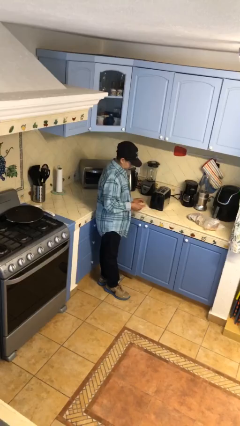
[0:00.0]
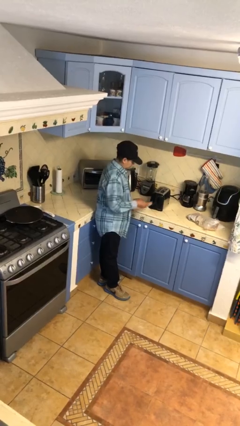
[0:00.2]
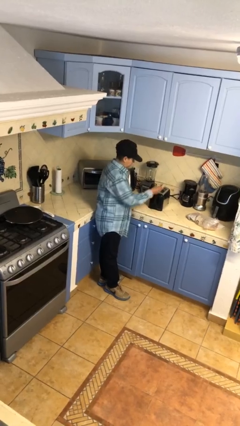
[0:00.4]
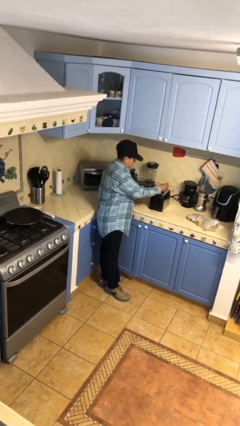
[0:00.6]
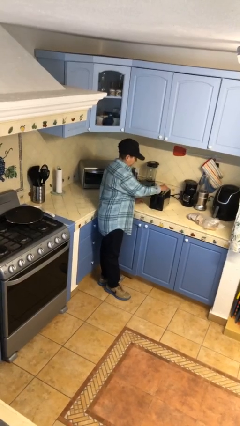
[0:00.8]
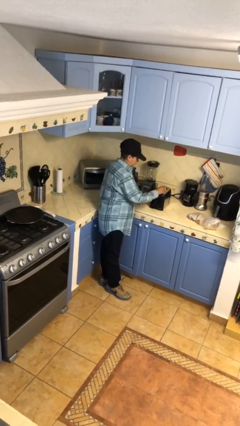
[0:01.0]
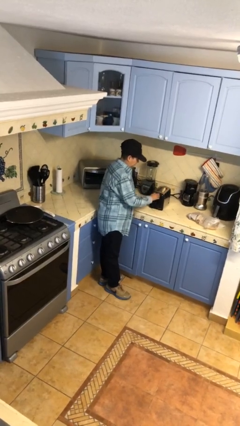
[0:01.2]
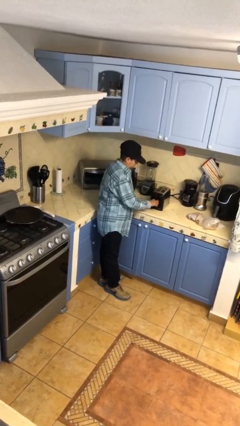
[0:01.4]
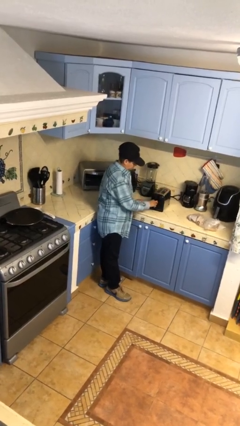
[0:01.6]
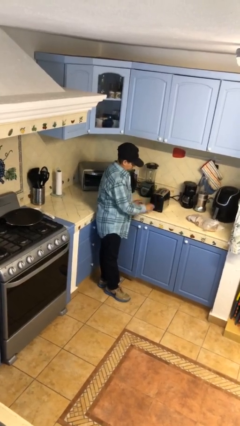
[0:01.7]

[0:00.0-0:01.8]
person puts object into toaster

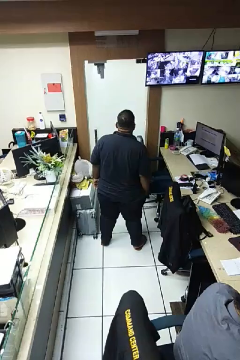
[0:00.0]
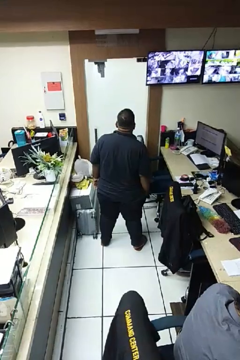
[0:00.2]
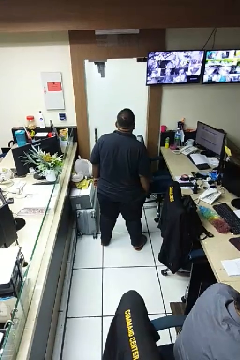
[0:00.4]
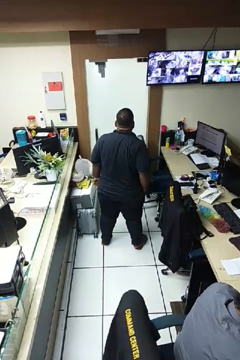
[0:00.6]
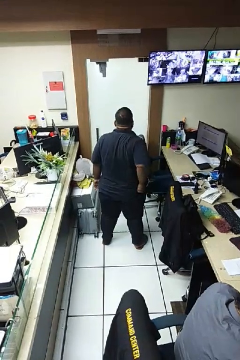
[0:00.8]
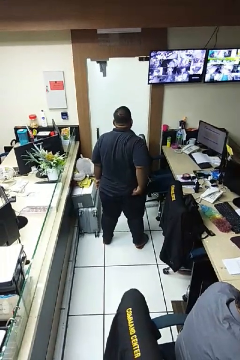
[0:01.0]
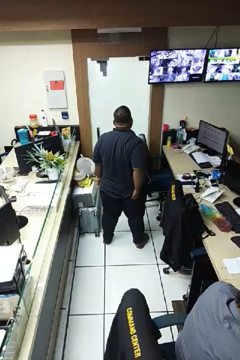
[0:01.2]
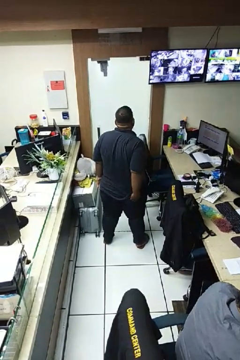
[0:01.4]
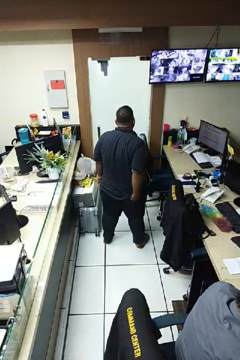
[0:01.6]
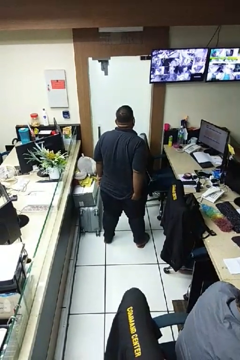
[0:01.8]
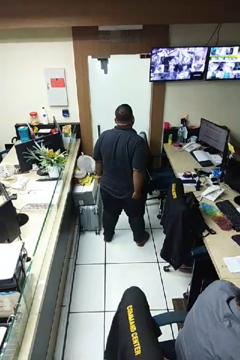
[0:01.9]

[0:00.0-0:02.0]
person puts hands in back pockets

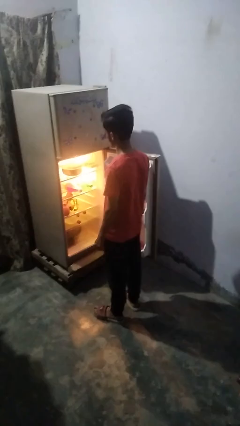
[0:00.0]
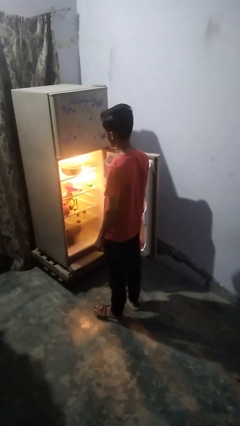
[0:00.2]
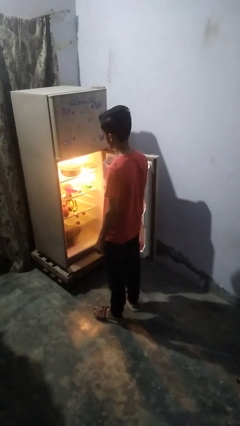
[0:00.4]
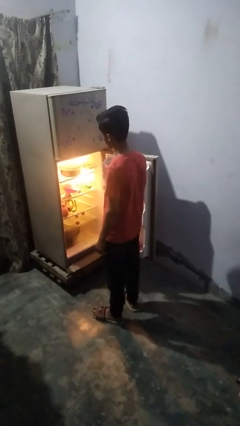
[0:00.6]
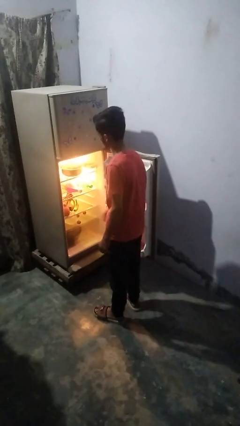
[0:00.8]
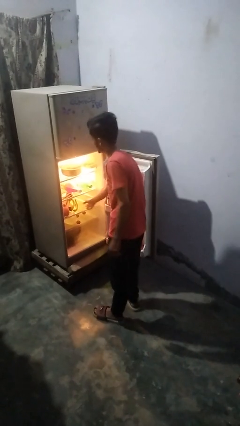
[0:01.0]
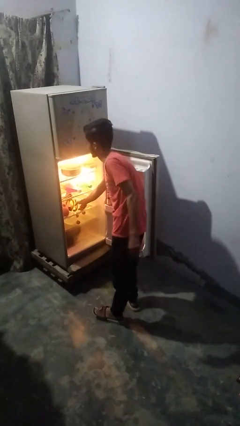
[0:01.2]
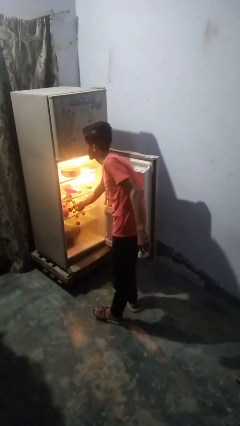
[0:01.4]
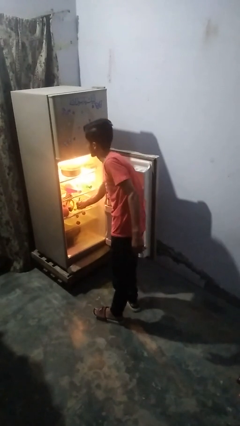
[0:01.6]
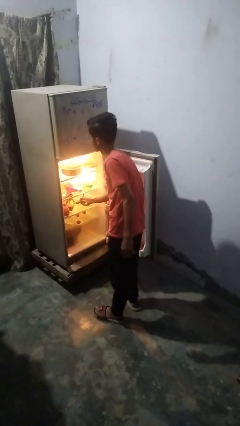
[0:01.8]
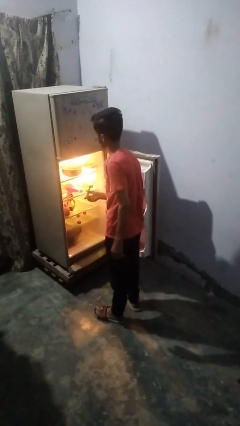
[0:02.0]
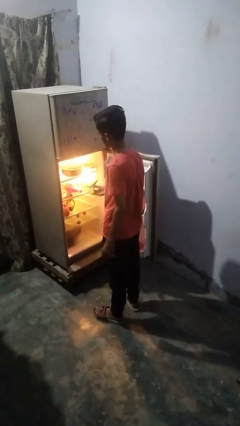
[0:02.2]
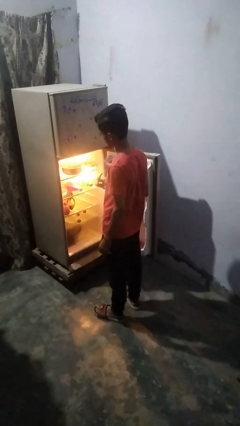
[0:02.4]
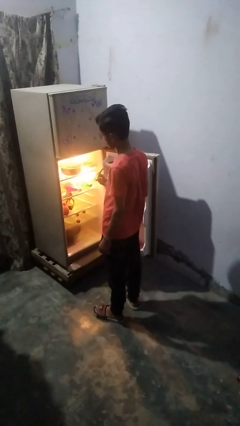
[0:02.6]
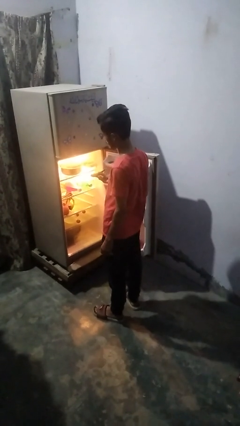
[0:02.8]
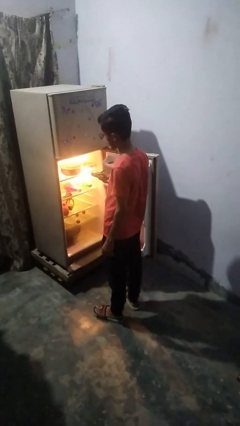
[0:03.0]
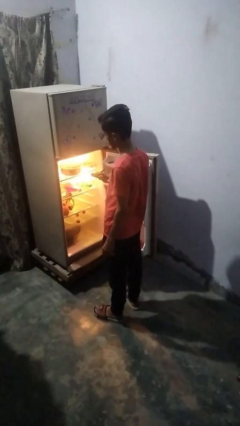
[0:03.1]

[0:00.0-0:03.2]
person puts object into refrigerator

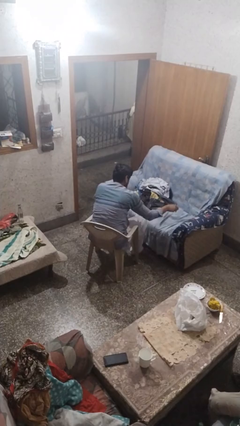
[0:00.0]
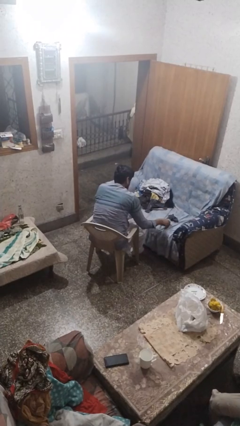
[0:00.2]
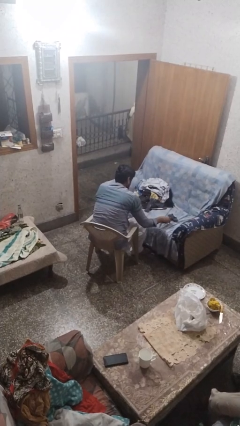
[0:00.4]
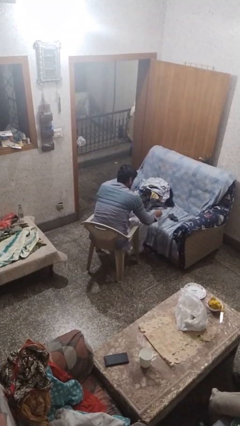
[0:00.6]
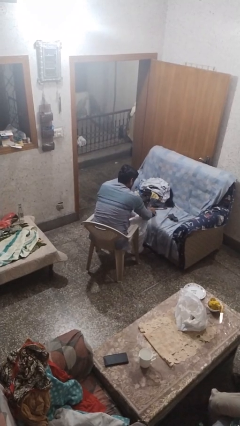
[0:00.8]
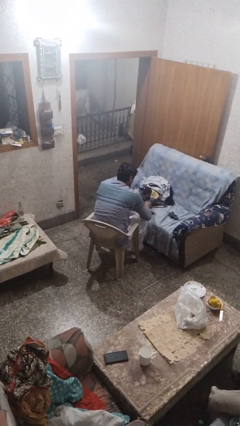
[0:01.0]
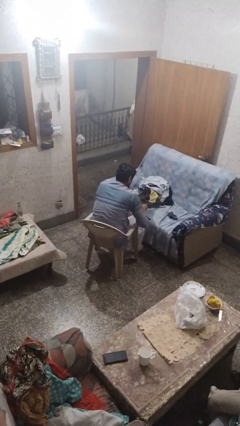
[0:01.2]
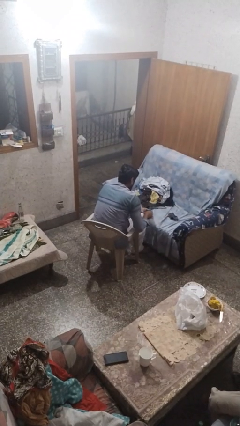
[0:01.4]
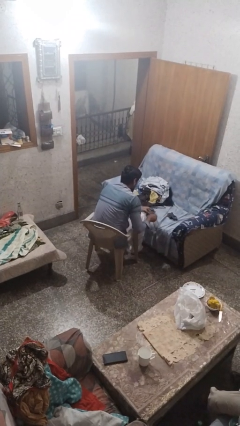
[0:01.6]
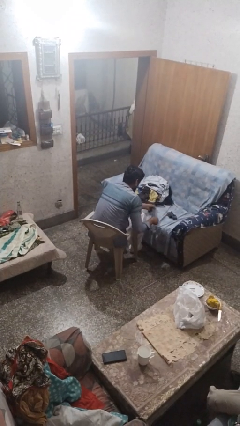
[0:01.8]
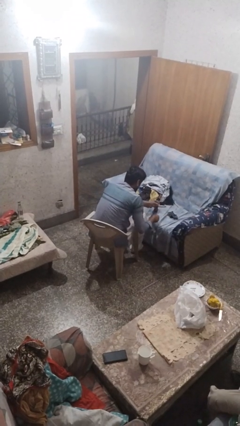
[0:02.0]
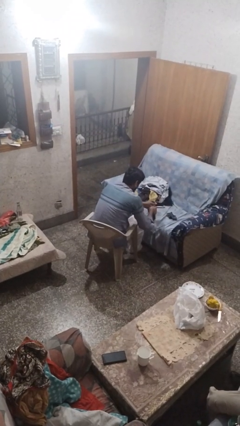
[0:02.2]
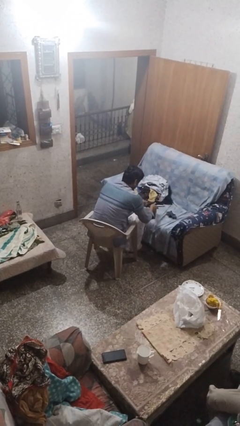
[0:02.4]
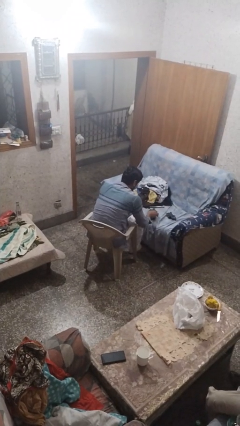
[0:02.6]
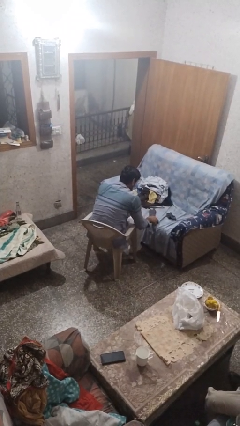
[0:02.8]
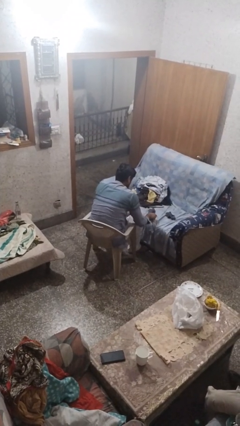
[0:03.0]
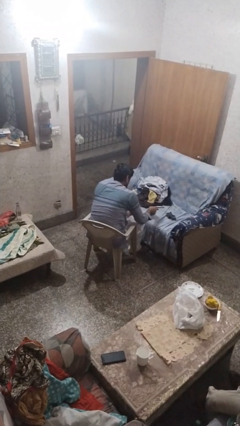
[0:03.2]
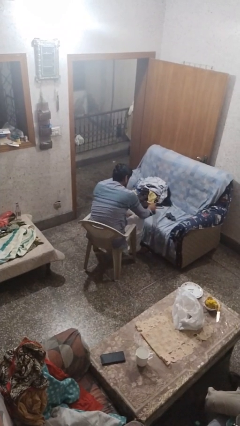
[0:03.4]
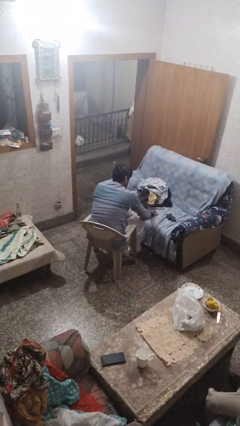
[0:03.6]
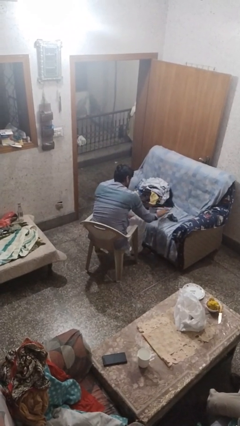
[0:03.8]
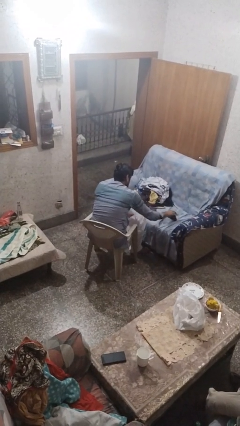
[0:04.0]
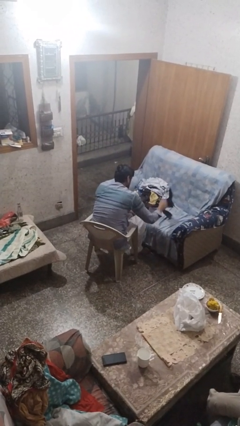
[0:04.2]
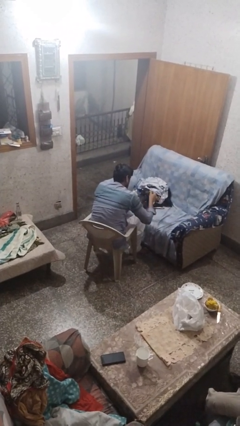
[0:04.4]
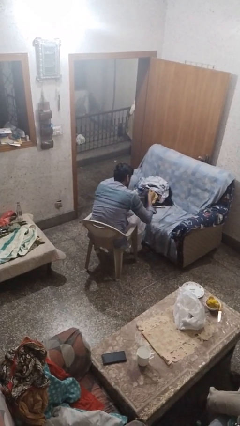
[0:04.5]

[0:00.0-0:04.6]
person folds socks

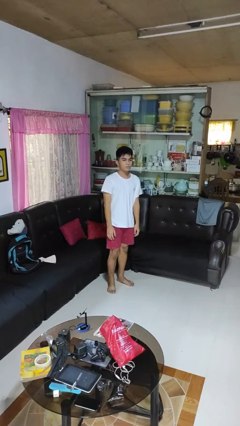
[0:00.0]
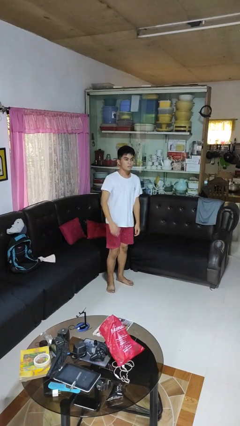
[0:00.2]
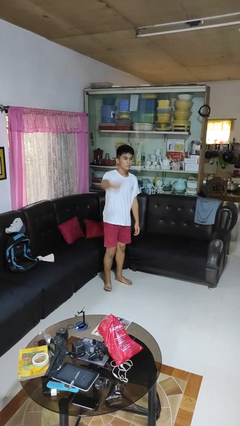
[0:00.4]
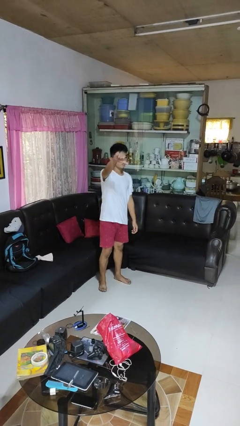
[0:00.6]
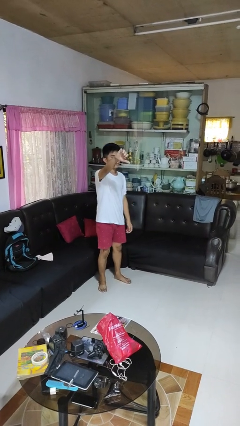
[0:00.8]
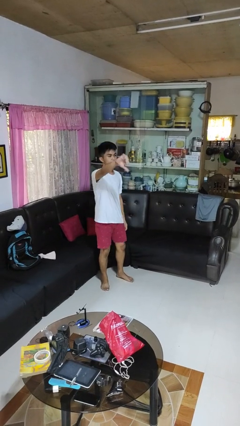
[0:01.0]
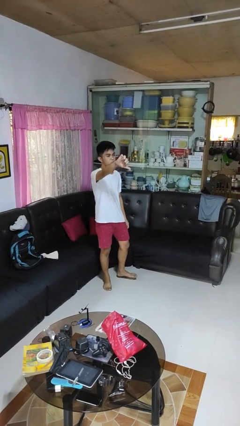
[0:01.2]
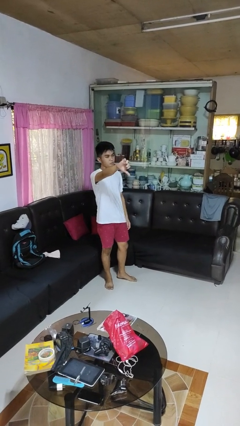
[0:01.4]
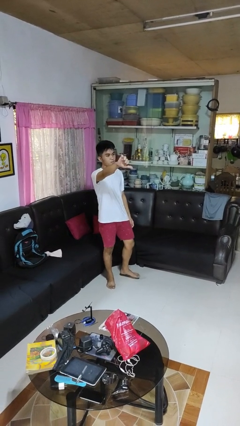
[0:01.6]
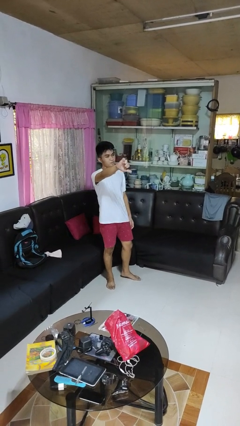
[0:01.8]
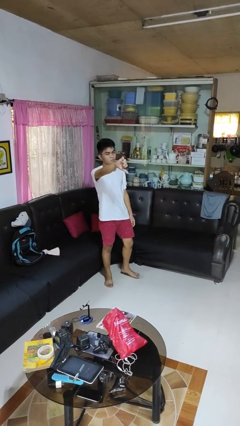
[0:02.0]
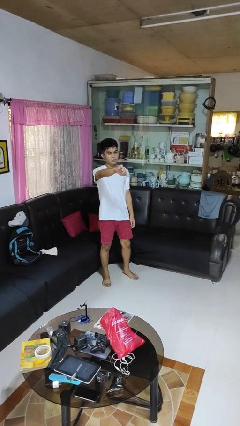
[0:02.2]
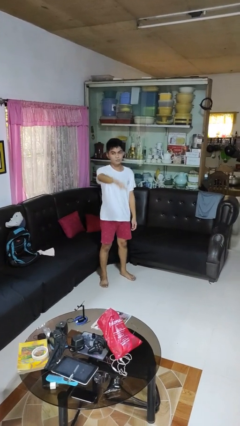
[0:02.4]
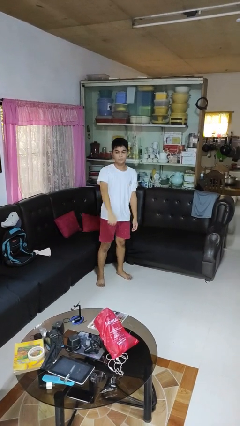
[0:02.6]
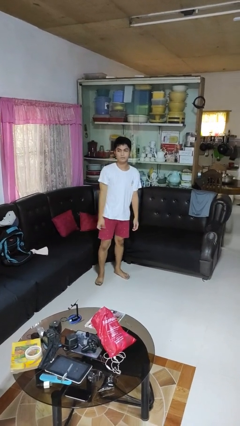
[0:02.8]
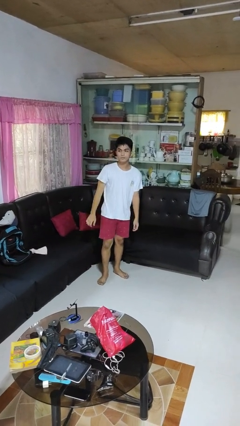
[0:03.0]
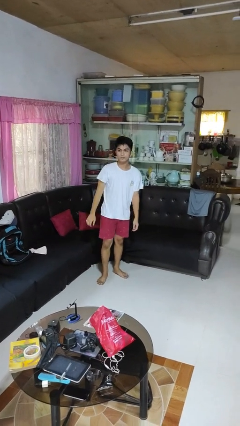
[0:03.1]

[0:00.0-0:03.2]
person gestures thumbs down

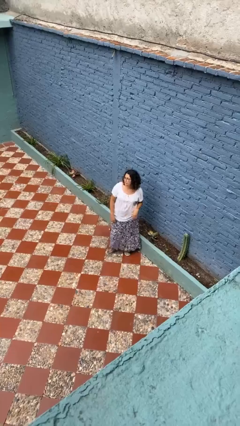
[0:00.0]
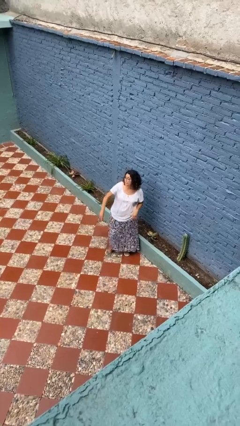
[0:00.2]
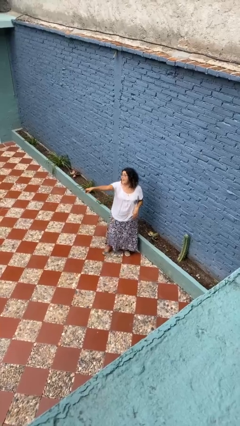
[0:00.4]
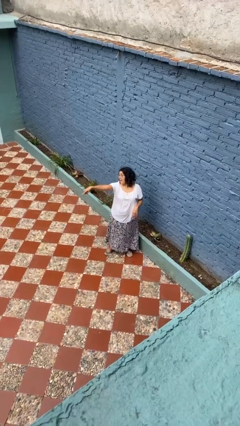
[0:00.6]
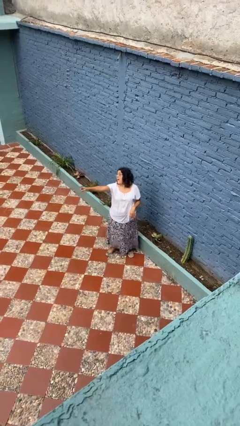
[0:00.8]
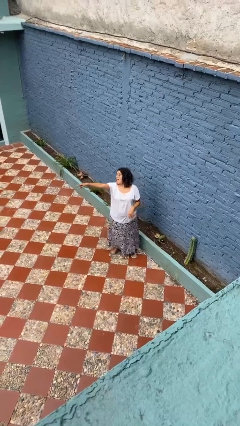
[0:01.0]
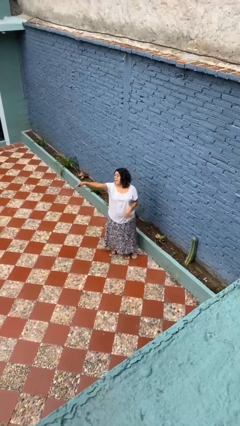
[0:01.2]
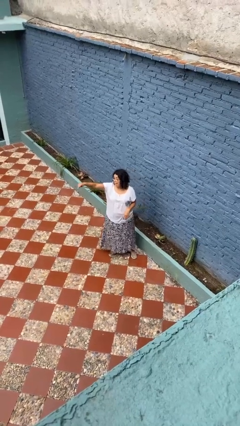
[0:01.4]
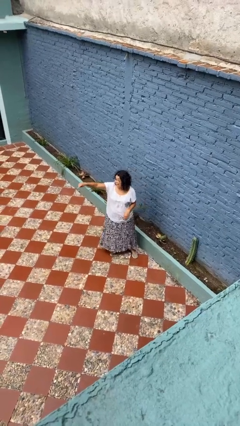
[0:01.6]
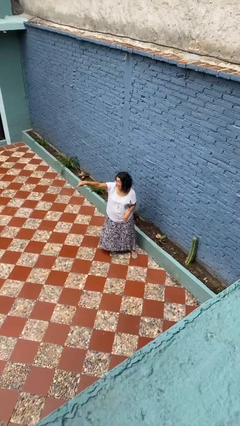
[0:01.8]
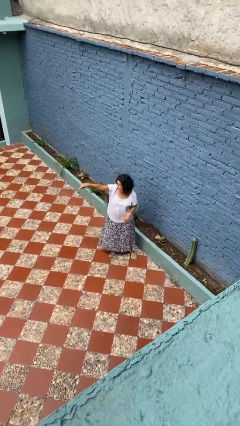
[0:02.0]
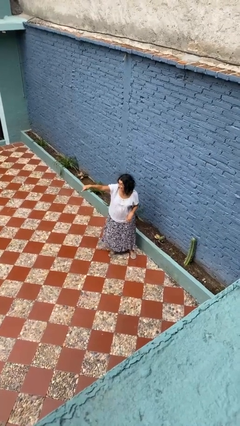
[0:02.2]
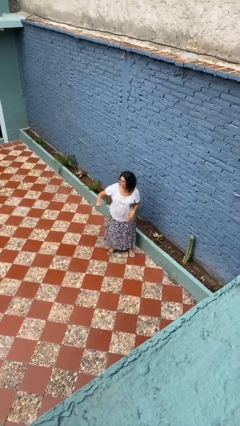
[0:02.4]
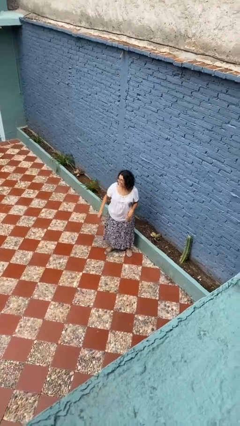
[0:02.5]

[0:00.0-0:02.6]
person points at person
